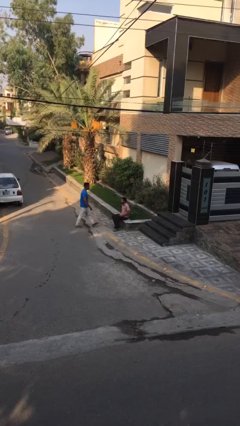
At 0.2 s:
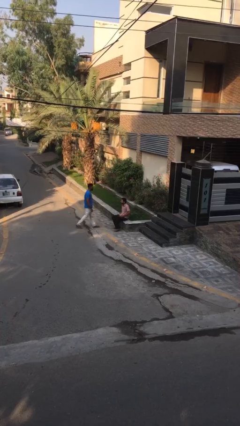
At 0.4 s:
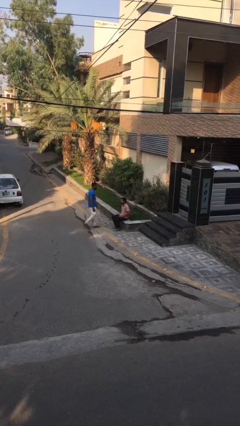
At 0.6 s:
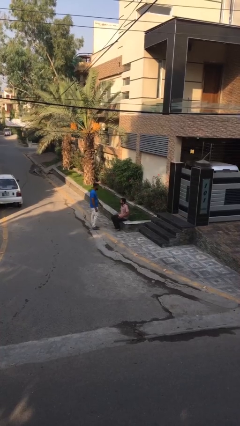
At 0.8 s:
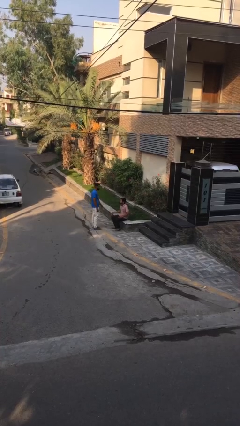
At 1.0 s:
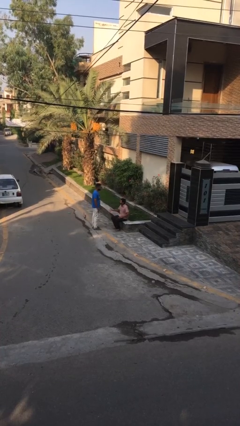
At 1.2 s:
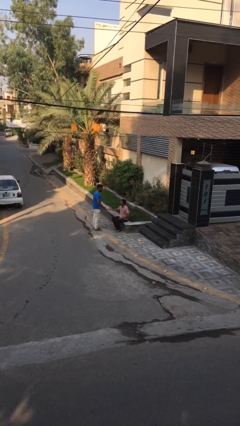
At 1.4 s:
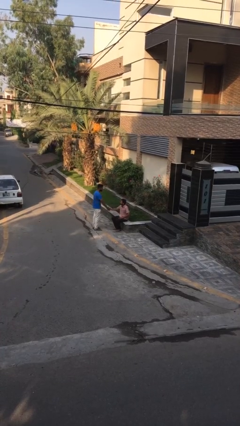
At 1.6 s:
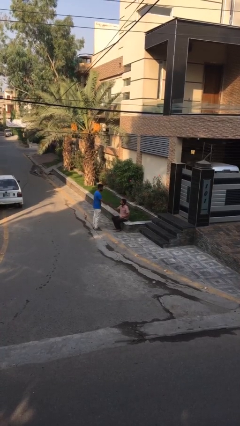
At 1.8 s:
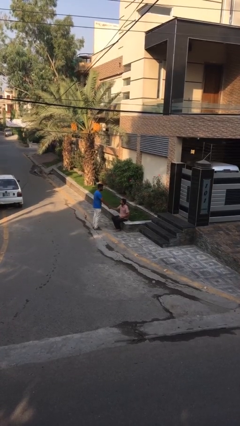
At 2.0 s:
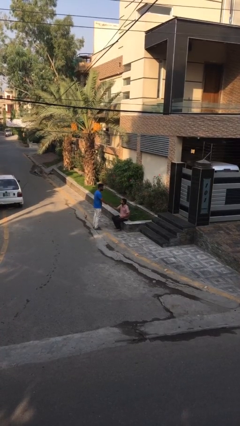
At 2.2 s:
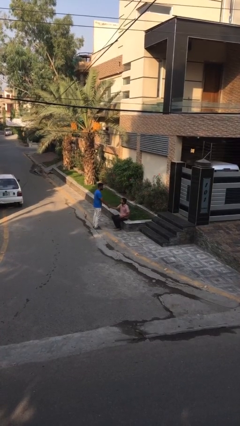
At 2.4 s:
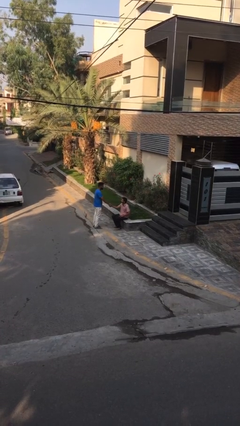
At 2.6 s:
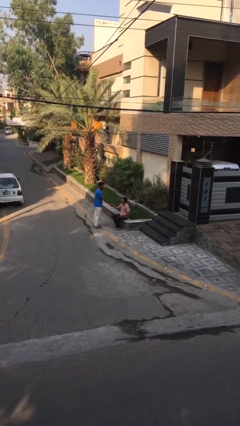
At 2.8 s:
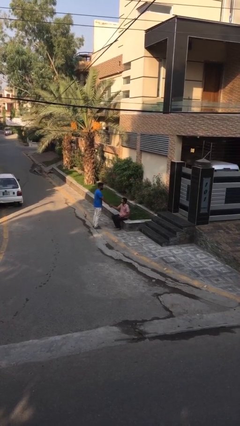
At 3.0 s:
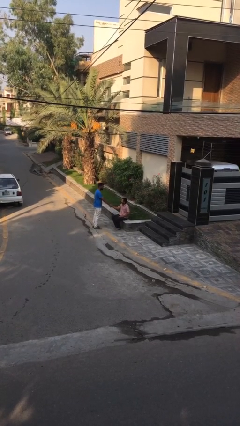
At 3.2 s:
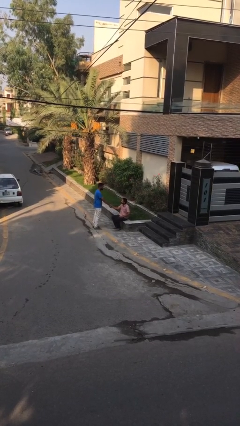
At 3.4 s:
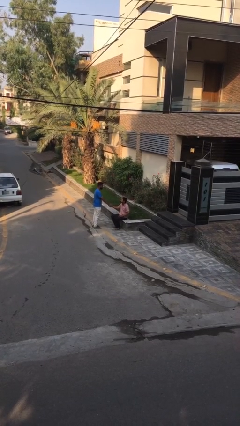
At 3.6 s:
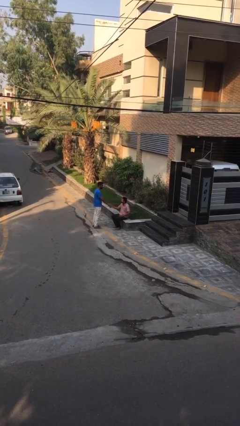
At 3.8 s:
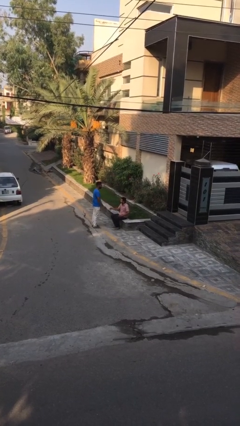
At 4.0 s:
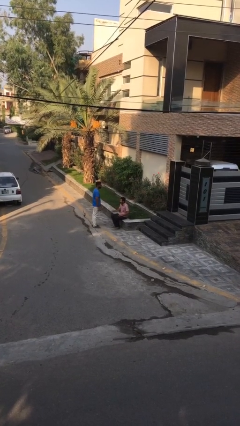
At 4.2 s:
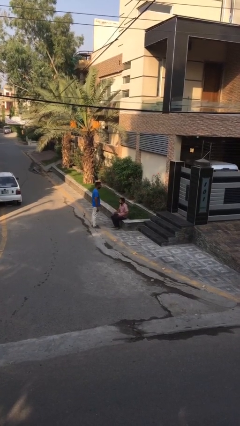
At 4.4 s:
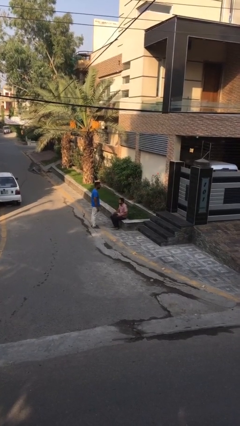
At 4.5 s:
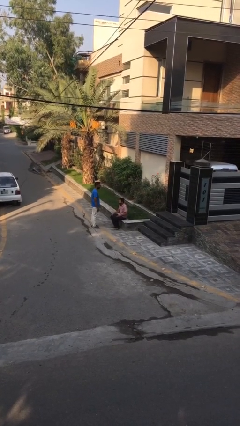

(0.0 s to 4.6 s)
person shakes hand

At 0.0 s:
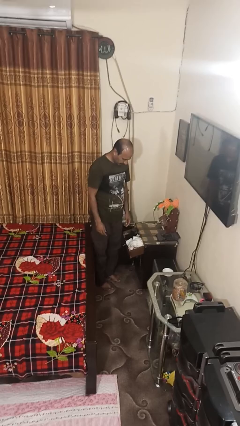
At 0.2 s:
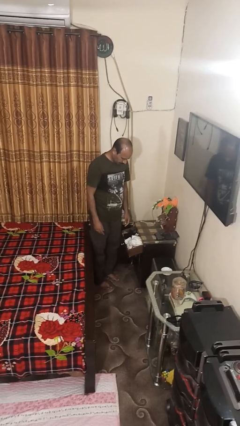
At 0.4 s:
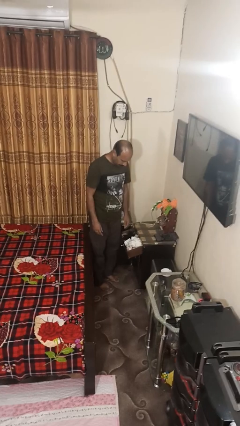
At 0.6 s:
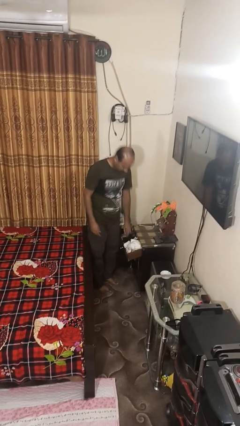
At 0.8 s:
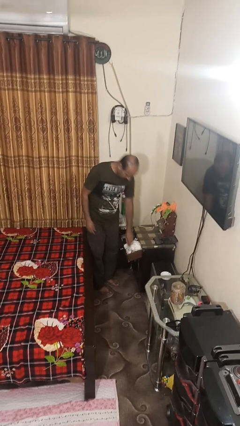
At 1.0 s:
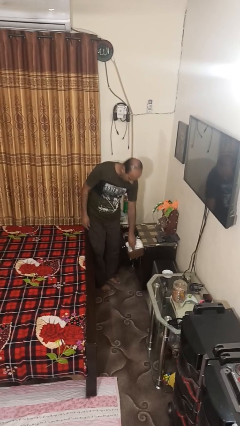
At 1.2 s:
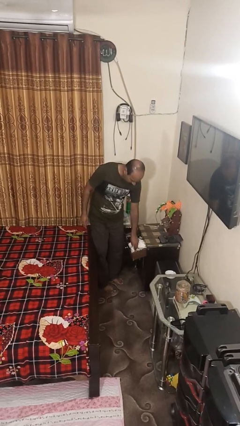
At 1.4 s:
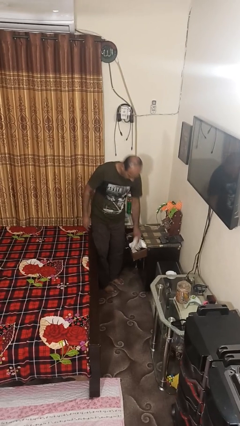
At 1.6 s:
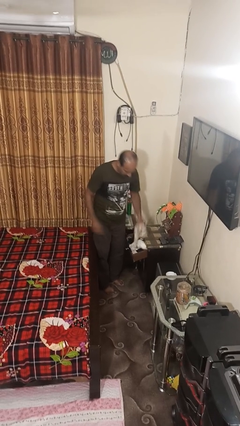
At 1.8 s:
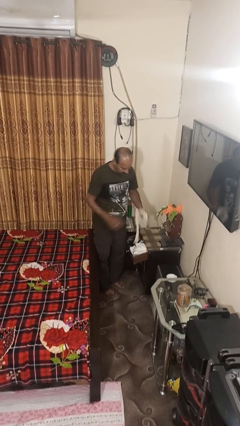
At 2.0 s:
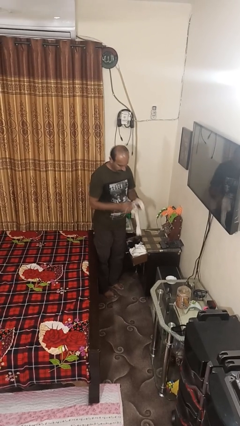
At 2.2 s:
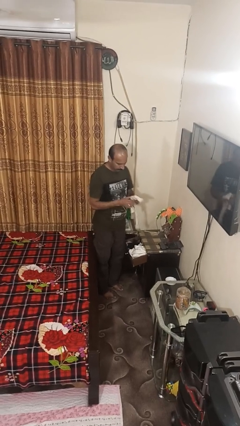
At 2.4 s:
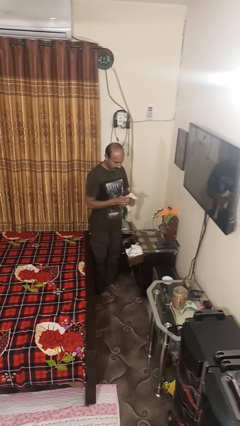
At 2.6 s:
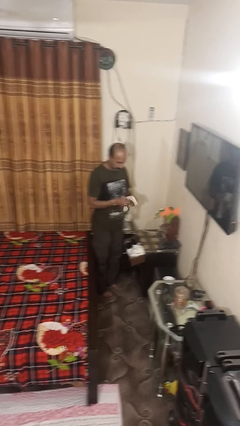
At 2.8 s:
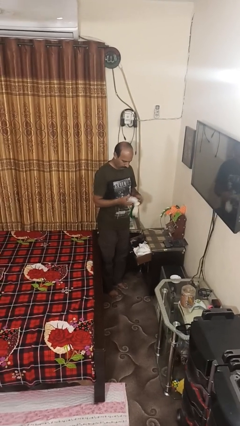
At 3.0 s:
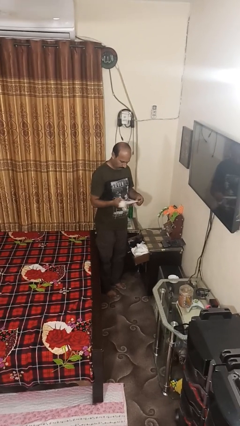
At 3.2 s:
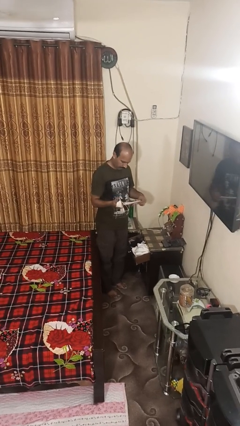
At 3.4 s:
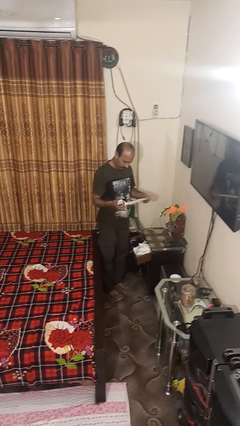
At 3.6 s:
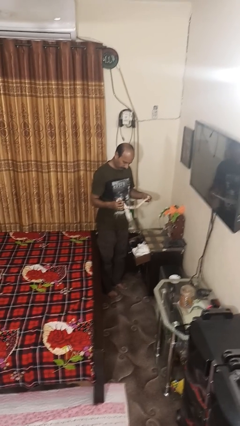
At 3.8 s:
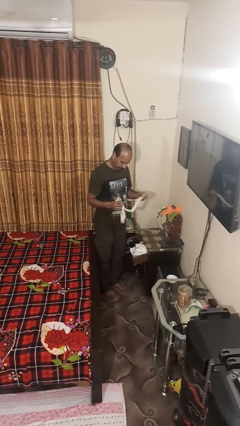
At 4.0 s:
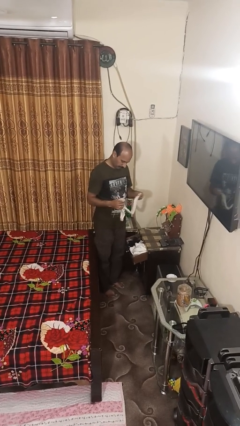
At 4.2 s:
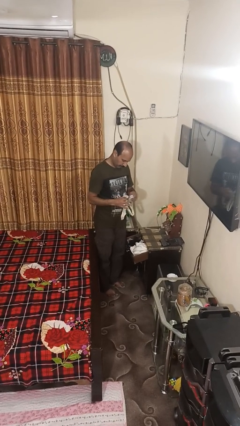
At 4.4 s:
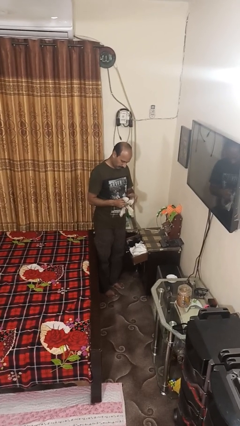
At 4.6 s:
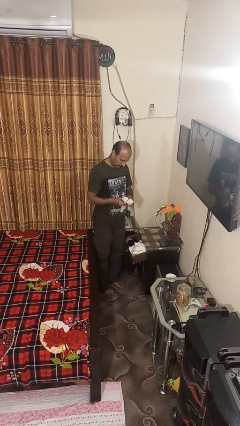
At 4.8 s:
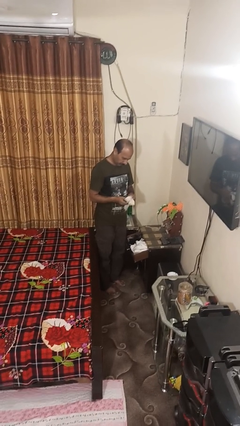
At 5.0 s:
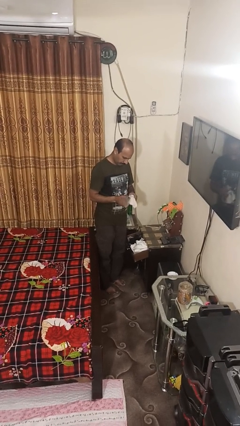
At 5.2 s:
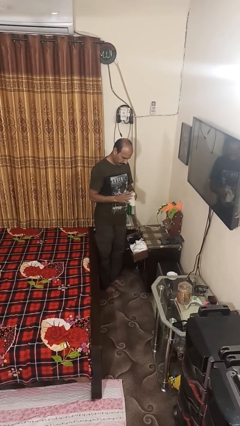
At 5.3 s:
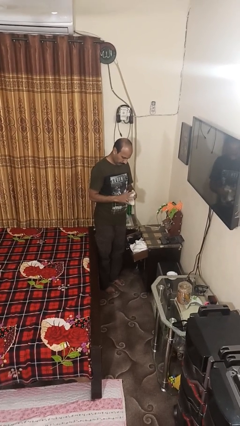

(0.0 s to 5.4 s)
person takes clothes from dresser

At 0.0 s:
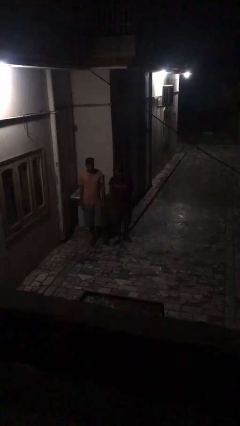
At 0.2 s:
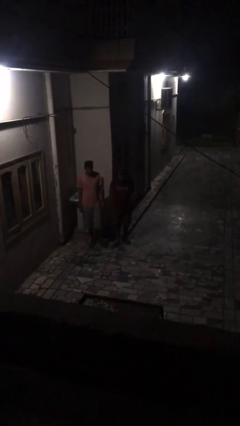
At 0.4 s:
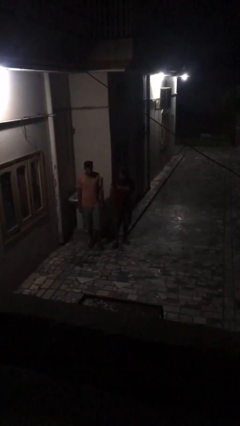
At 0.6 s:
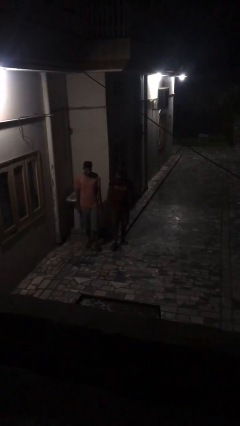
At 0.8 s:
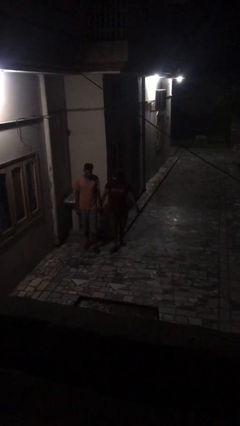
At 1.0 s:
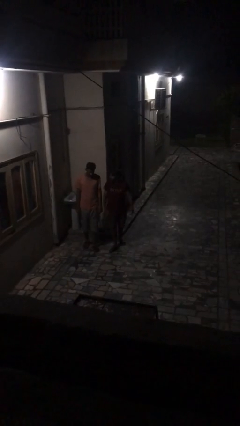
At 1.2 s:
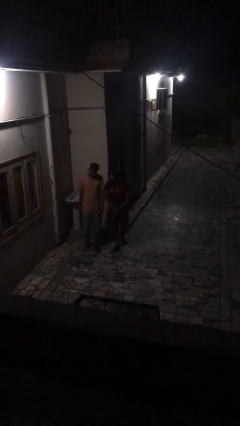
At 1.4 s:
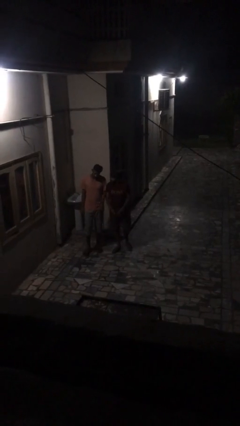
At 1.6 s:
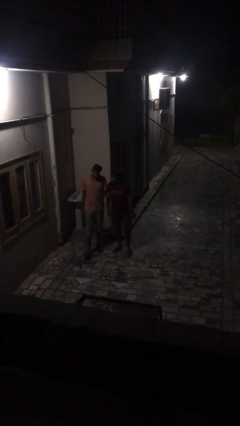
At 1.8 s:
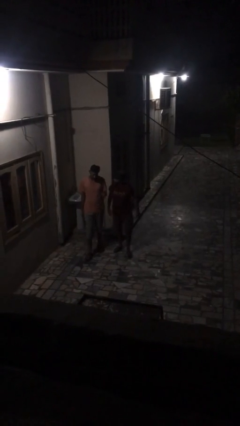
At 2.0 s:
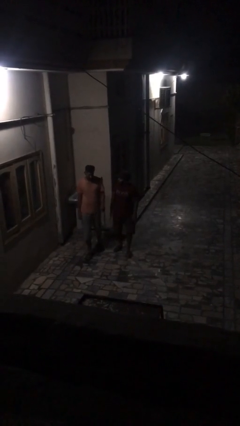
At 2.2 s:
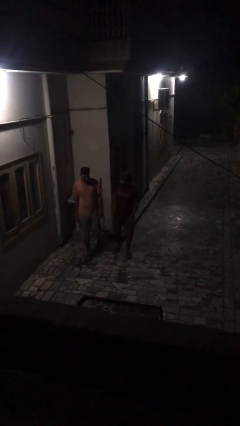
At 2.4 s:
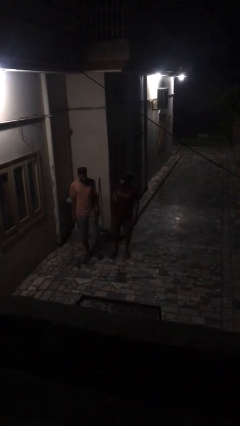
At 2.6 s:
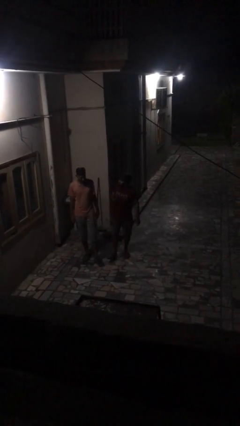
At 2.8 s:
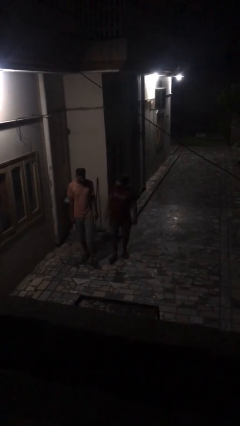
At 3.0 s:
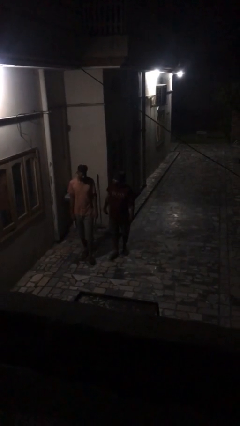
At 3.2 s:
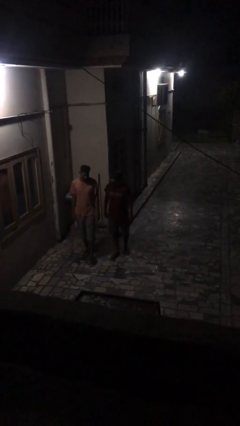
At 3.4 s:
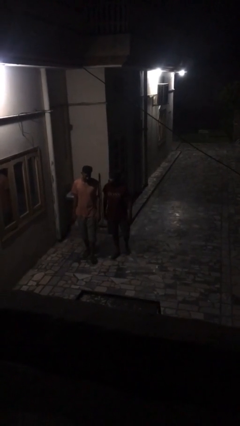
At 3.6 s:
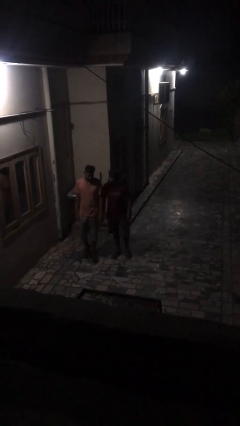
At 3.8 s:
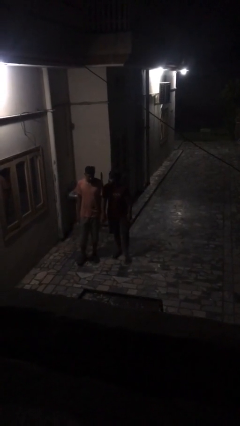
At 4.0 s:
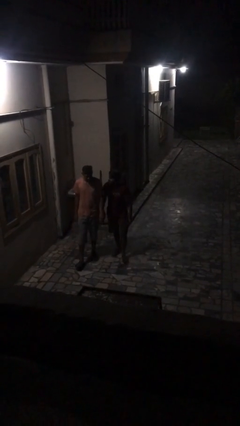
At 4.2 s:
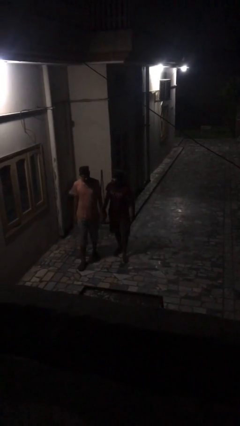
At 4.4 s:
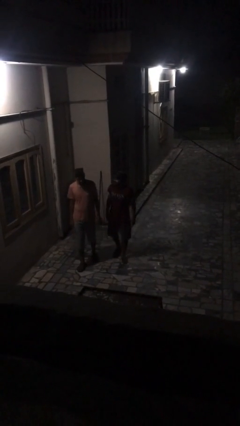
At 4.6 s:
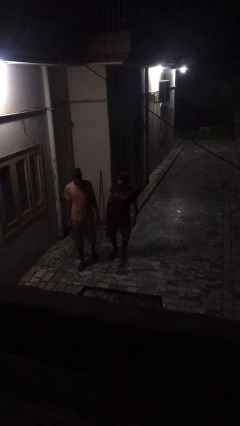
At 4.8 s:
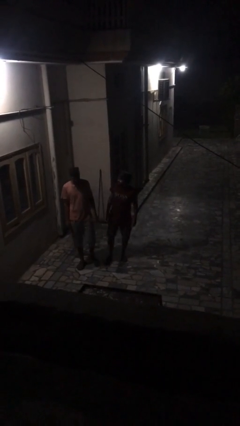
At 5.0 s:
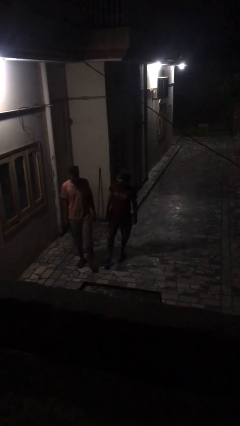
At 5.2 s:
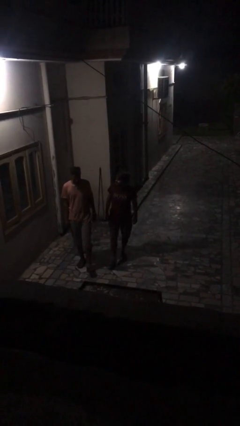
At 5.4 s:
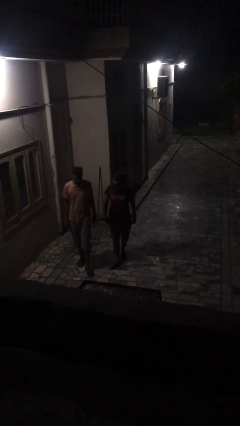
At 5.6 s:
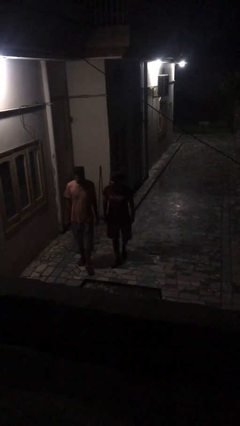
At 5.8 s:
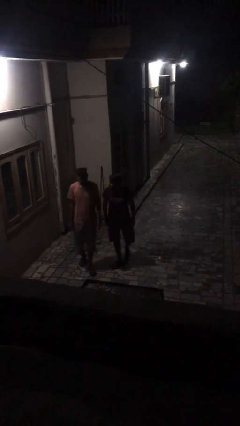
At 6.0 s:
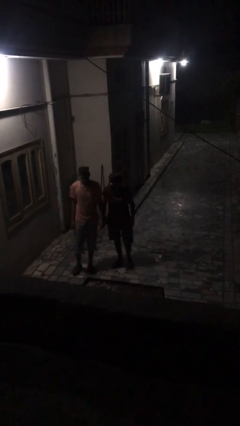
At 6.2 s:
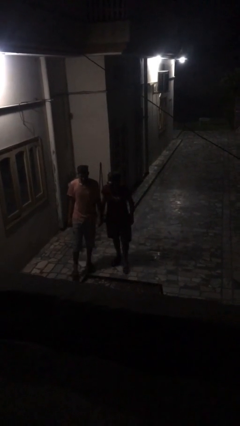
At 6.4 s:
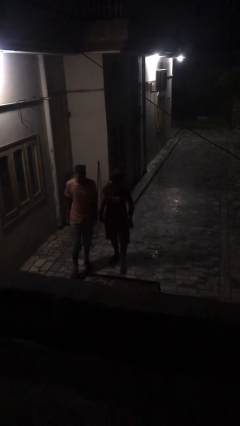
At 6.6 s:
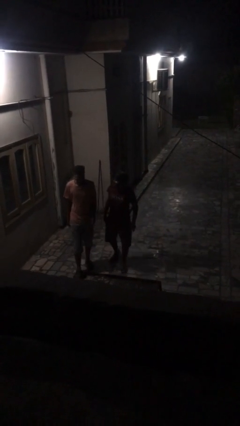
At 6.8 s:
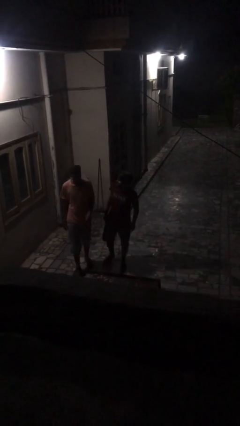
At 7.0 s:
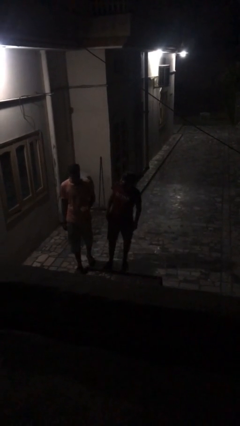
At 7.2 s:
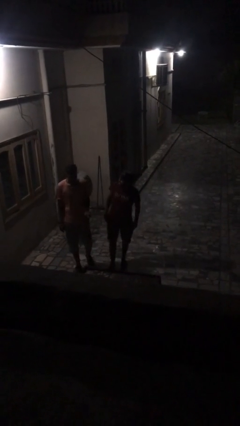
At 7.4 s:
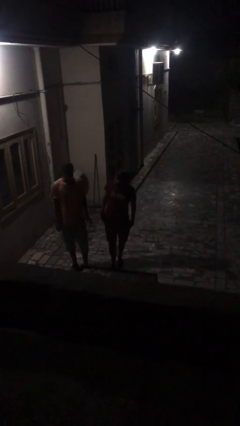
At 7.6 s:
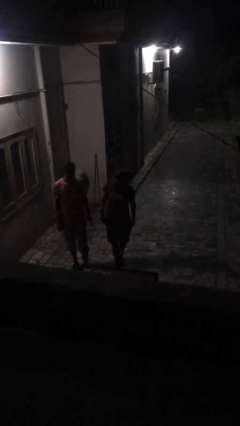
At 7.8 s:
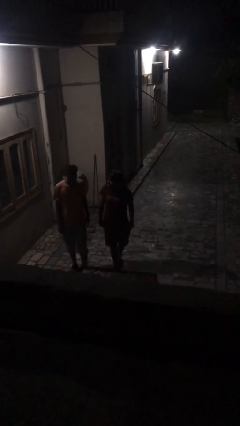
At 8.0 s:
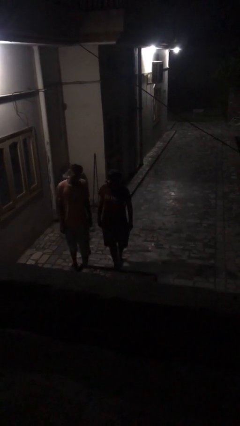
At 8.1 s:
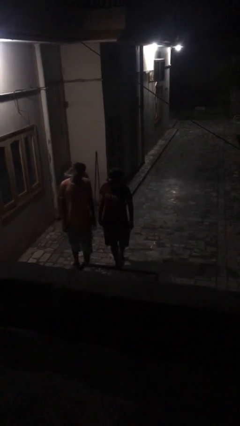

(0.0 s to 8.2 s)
person talks to person
